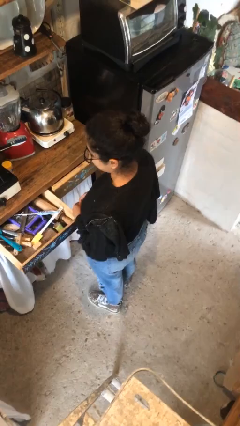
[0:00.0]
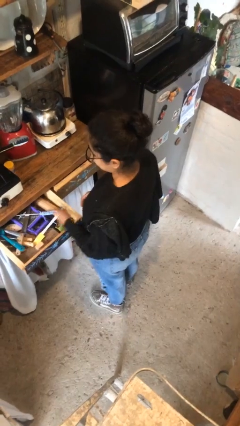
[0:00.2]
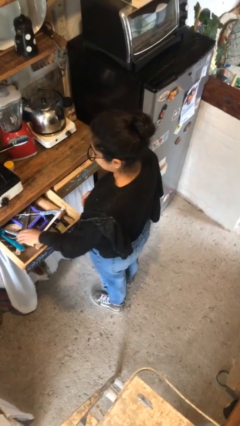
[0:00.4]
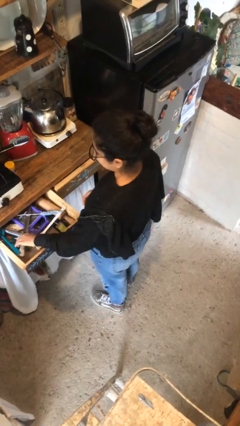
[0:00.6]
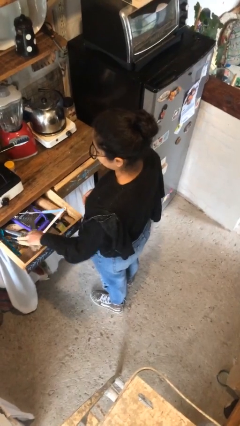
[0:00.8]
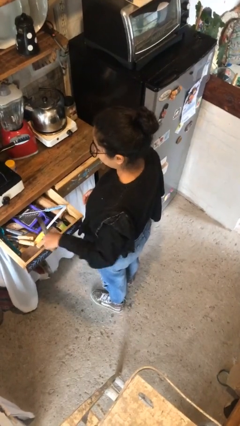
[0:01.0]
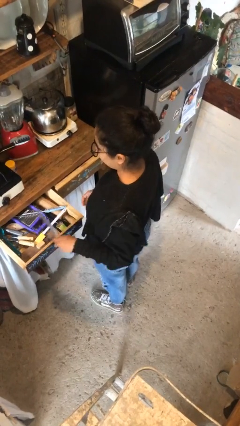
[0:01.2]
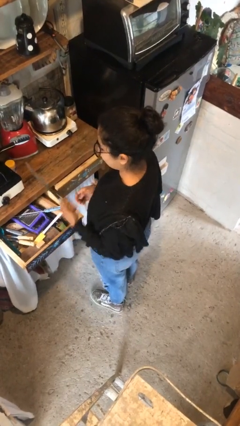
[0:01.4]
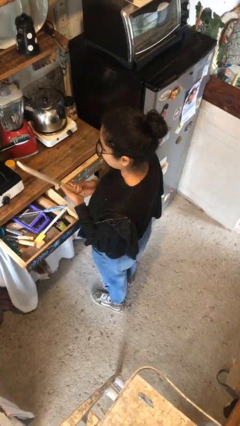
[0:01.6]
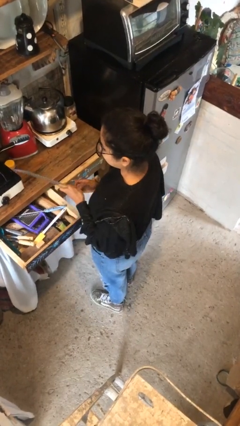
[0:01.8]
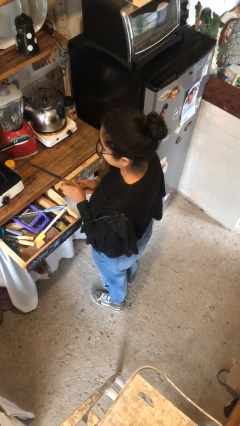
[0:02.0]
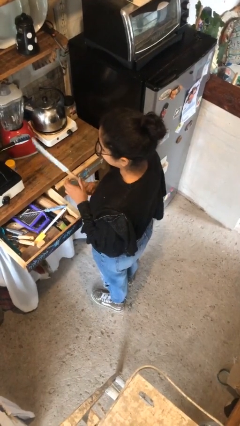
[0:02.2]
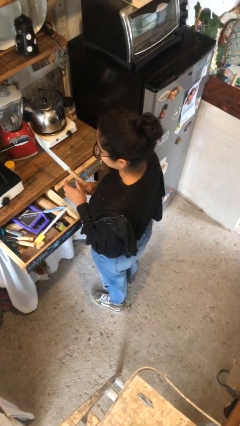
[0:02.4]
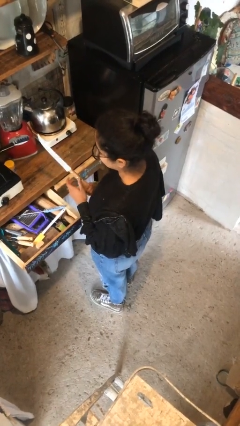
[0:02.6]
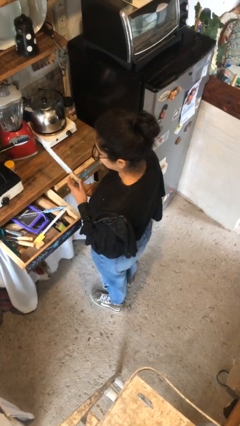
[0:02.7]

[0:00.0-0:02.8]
person takes object from kitchen drawer

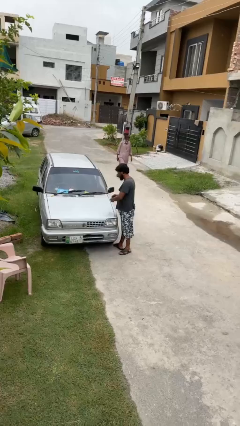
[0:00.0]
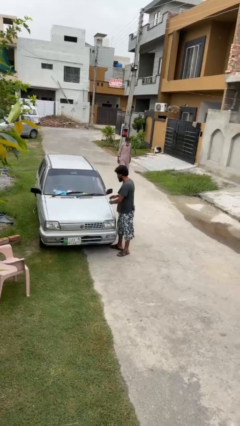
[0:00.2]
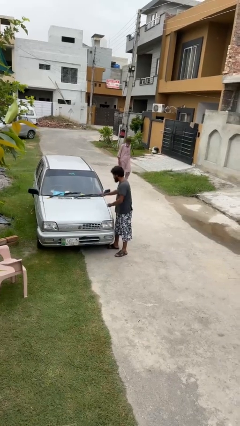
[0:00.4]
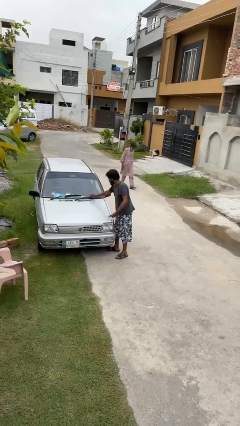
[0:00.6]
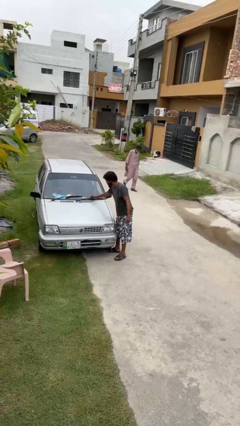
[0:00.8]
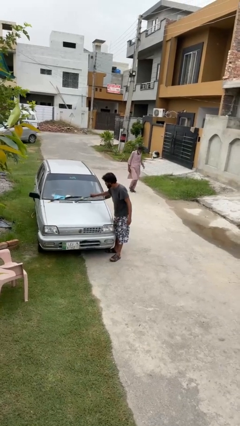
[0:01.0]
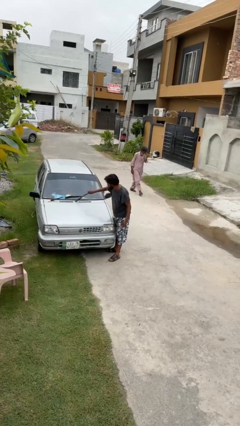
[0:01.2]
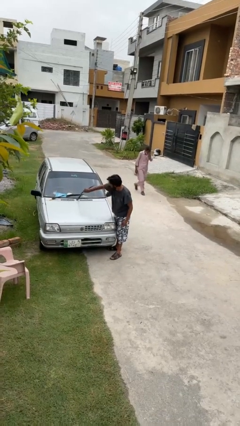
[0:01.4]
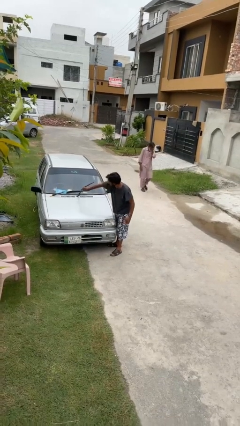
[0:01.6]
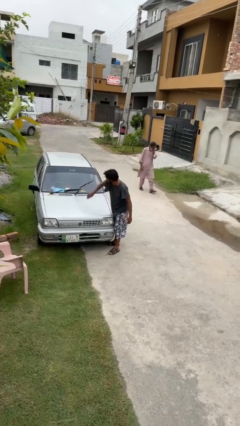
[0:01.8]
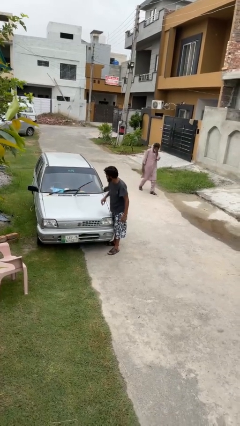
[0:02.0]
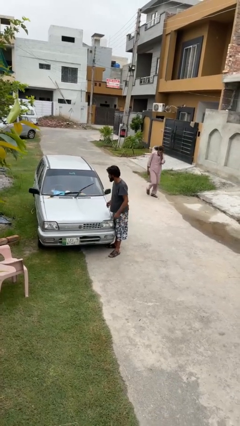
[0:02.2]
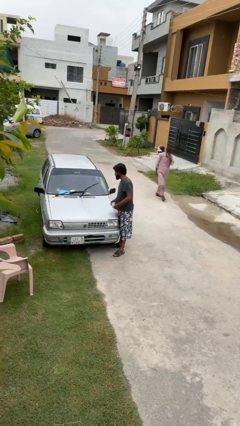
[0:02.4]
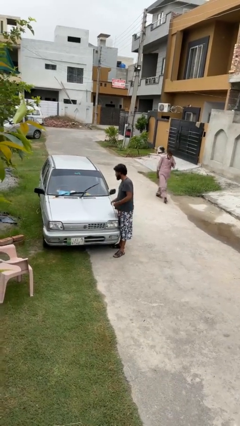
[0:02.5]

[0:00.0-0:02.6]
person flips up car wipers

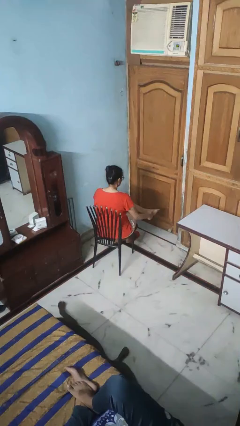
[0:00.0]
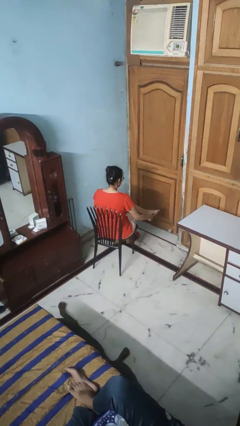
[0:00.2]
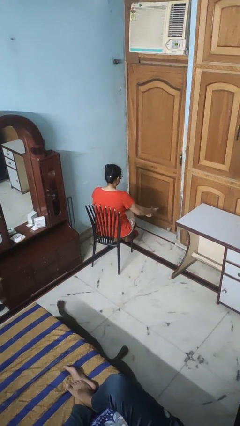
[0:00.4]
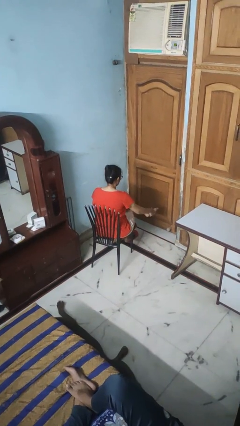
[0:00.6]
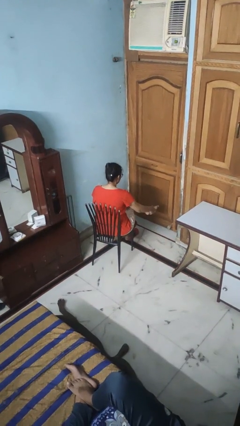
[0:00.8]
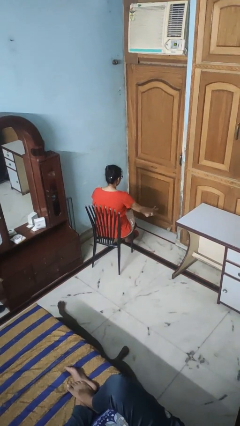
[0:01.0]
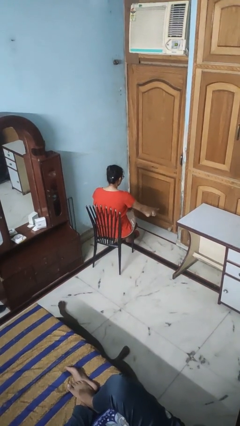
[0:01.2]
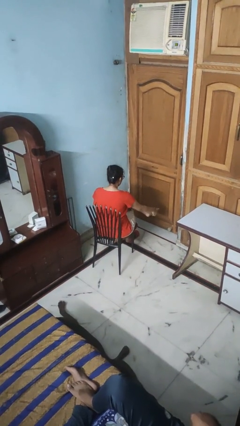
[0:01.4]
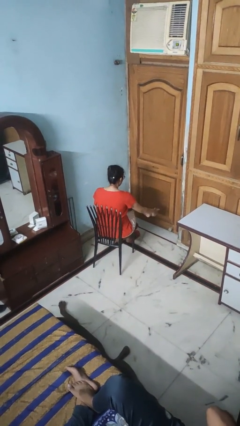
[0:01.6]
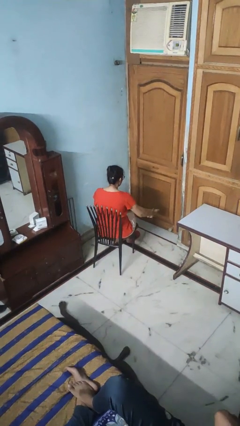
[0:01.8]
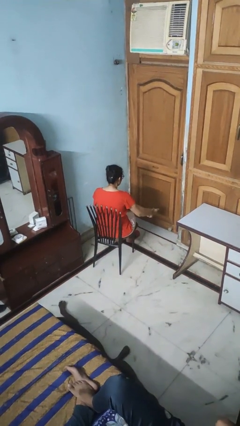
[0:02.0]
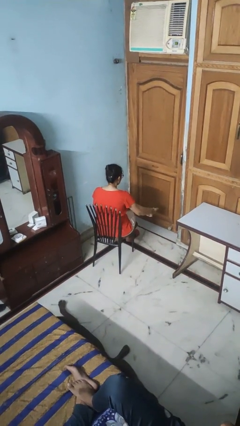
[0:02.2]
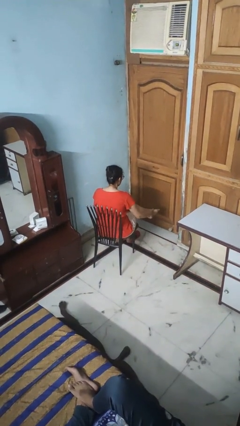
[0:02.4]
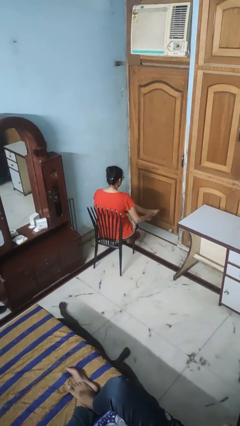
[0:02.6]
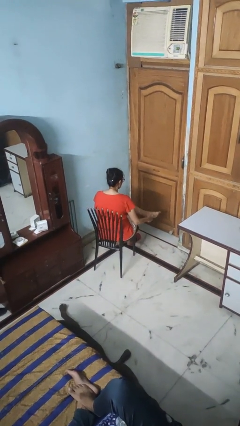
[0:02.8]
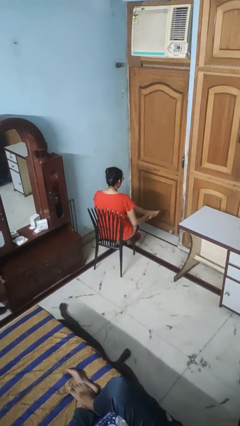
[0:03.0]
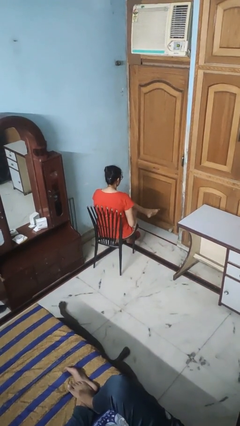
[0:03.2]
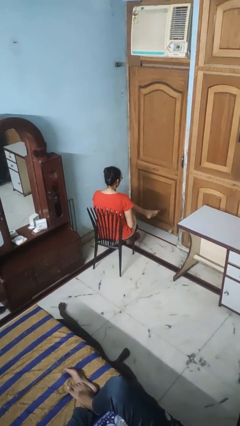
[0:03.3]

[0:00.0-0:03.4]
person rubs foot

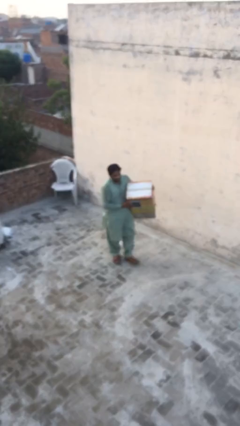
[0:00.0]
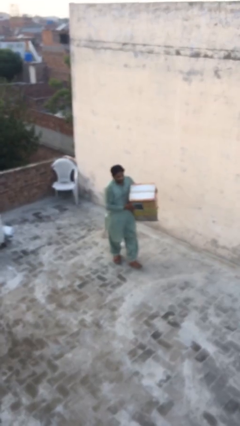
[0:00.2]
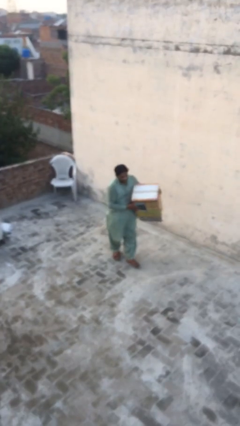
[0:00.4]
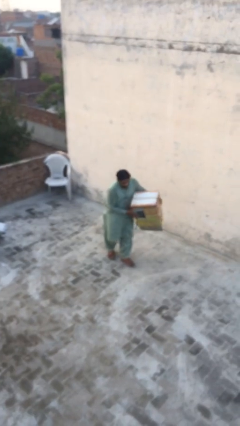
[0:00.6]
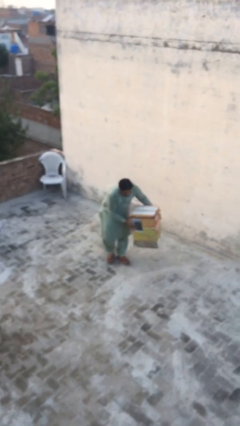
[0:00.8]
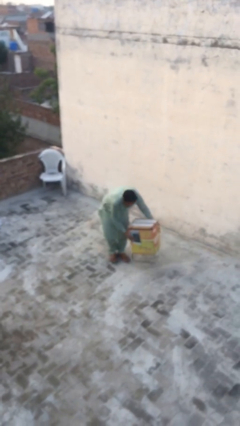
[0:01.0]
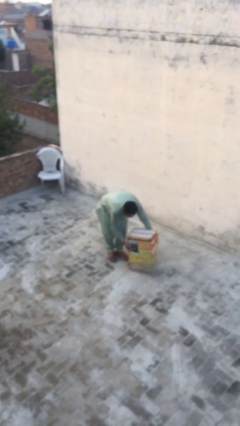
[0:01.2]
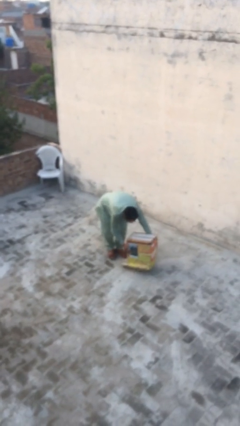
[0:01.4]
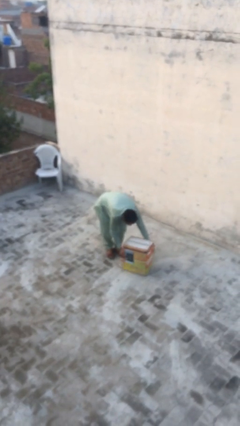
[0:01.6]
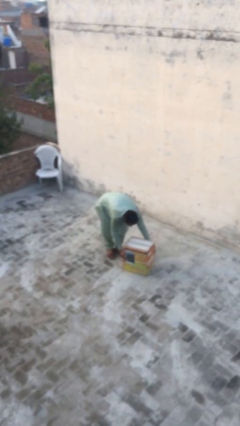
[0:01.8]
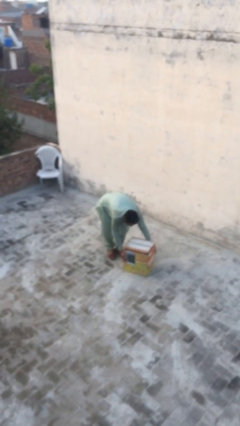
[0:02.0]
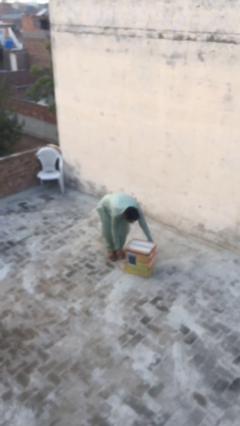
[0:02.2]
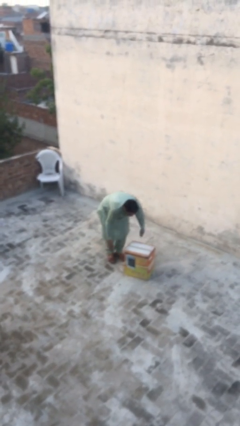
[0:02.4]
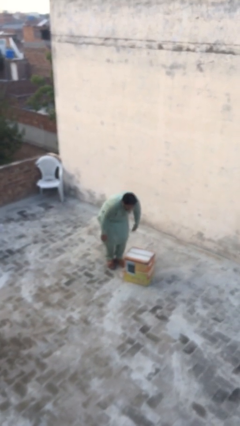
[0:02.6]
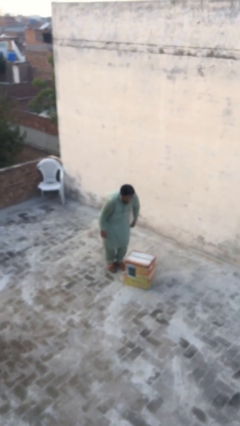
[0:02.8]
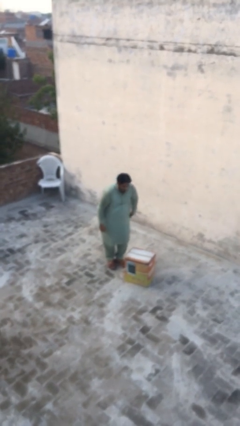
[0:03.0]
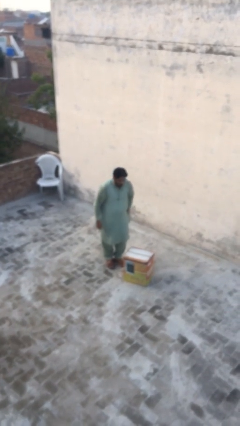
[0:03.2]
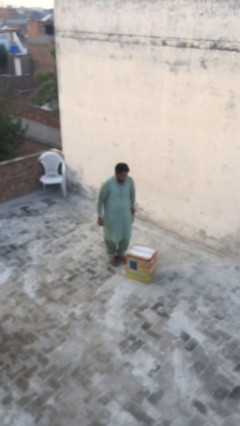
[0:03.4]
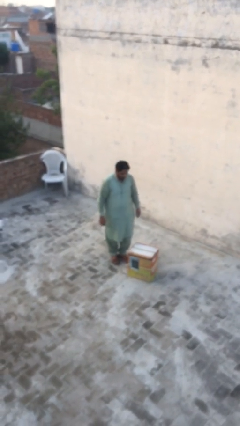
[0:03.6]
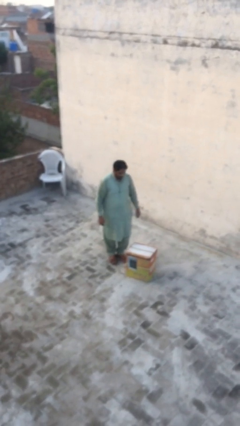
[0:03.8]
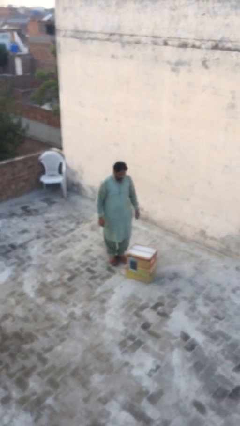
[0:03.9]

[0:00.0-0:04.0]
person puts down object on floor

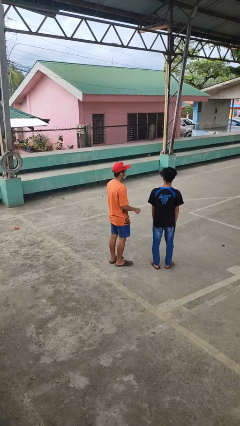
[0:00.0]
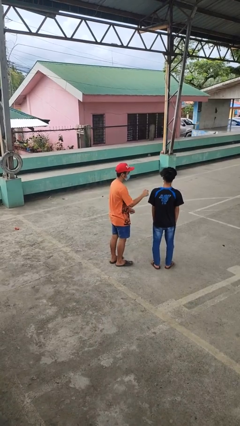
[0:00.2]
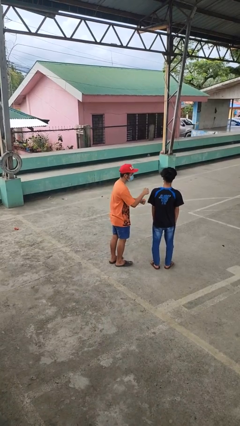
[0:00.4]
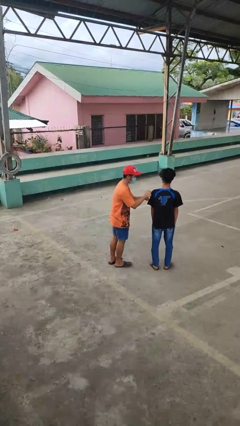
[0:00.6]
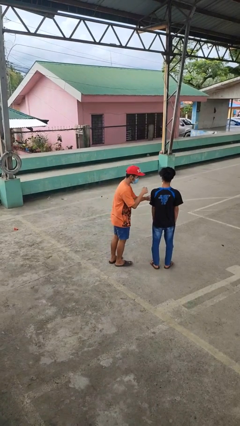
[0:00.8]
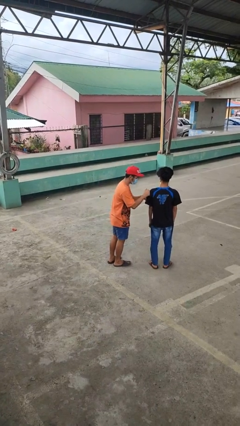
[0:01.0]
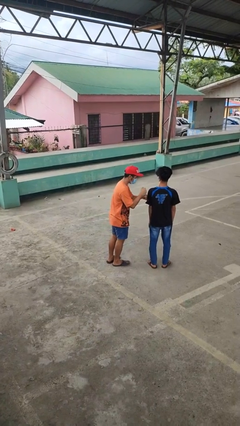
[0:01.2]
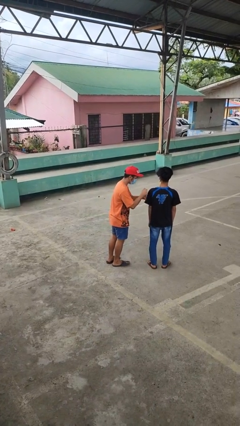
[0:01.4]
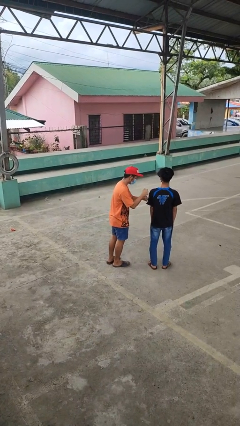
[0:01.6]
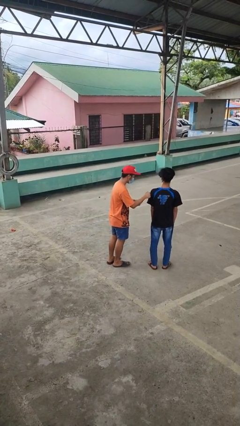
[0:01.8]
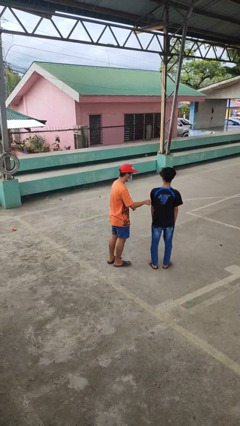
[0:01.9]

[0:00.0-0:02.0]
person pounds shoulders of person

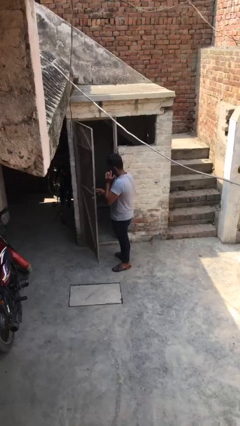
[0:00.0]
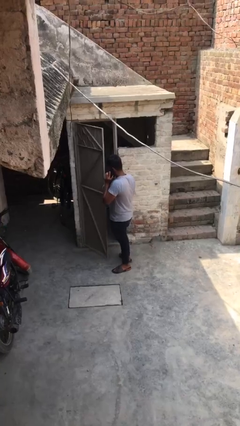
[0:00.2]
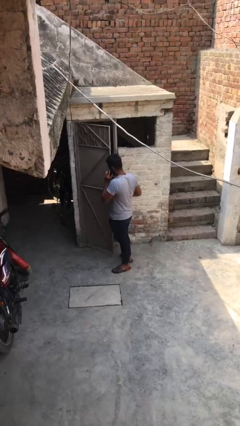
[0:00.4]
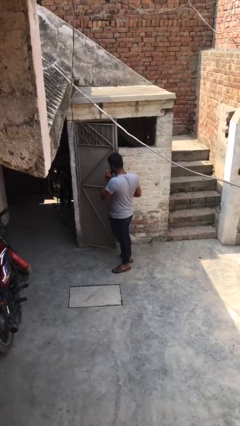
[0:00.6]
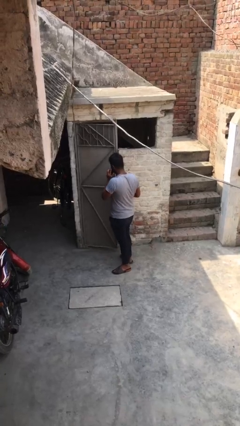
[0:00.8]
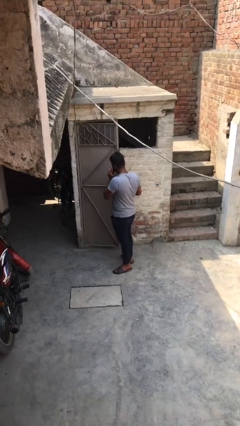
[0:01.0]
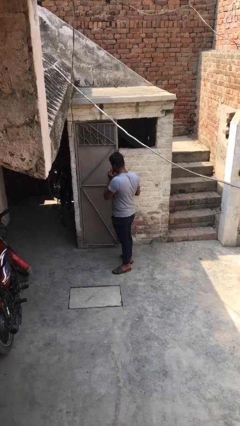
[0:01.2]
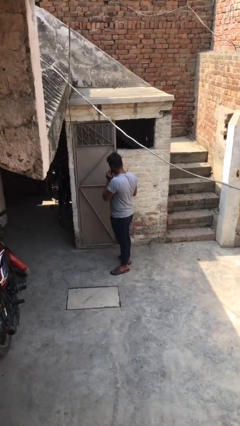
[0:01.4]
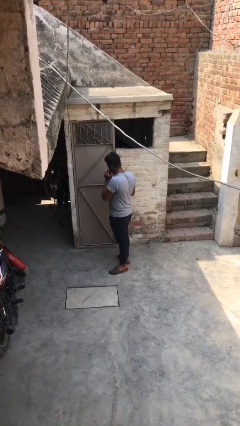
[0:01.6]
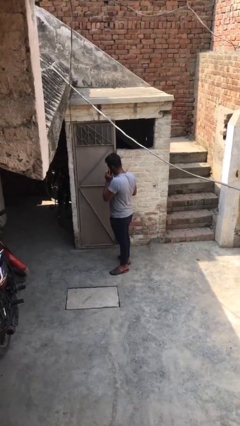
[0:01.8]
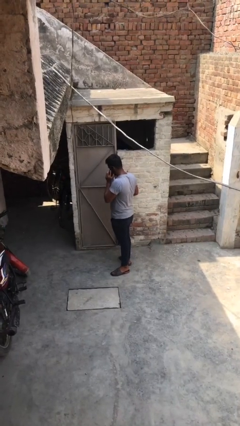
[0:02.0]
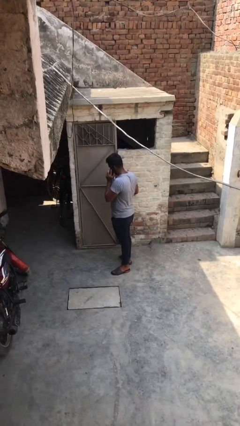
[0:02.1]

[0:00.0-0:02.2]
person closes facility door
